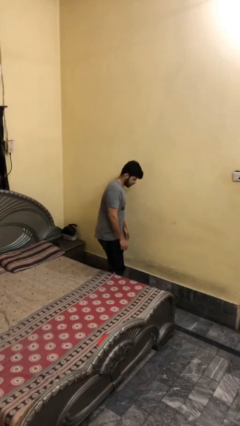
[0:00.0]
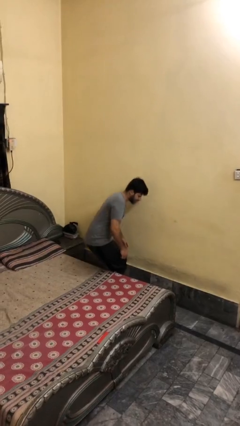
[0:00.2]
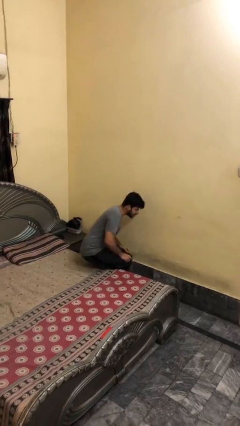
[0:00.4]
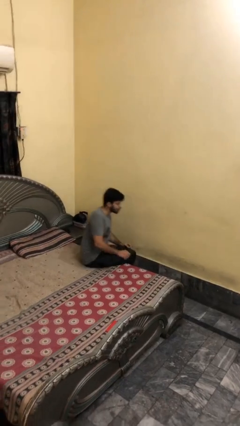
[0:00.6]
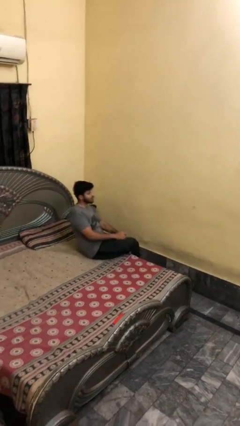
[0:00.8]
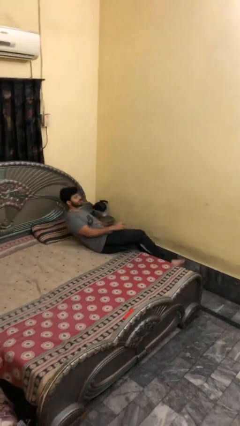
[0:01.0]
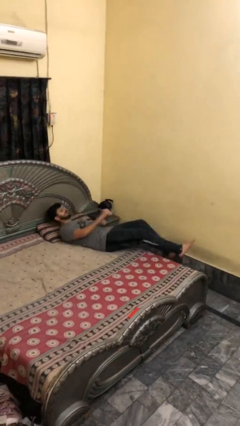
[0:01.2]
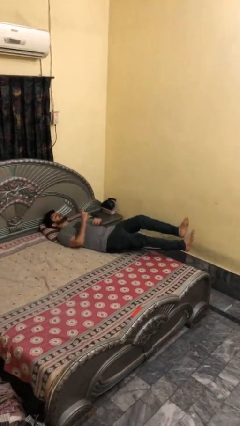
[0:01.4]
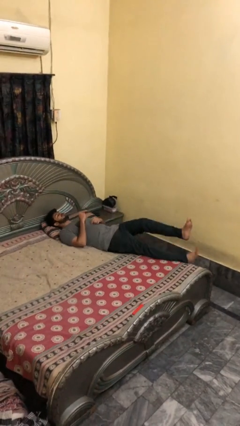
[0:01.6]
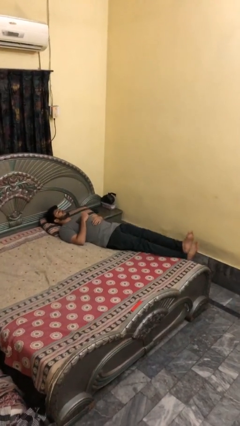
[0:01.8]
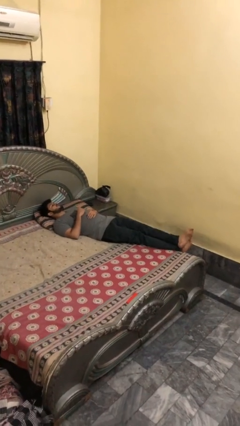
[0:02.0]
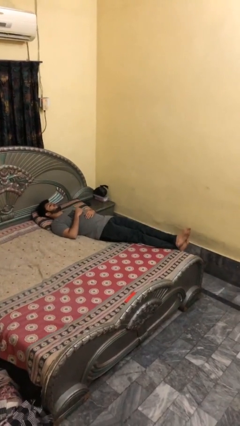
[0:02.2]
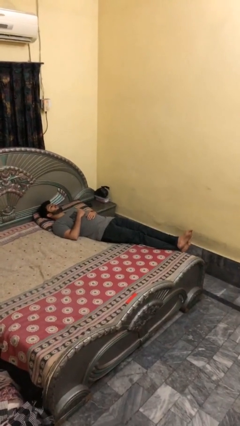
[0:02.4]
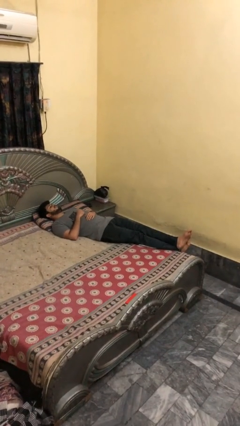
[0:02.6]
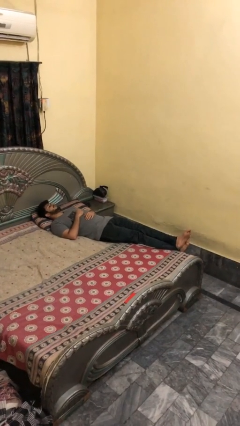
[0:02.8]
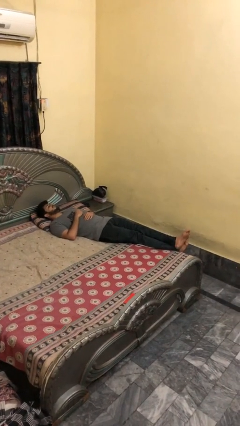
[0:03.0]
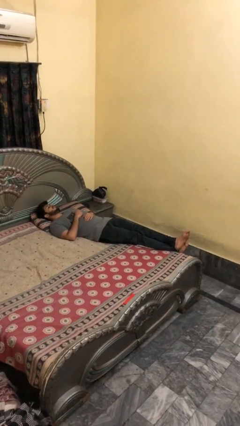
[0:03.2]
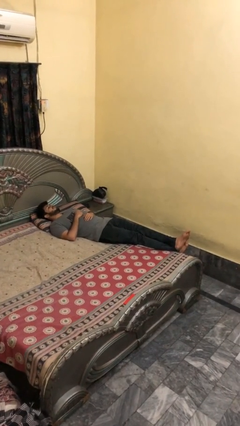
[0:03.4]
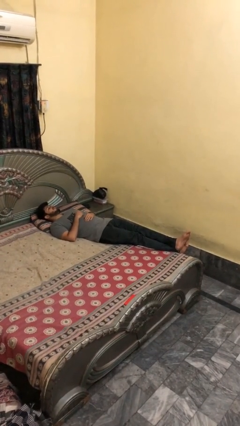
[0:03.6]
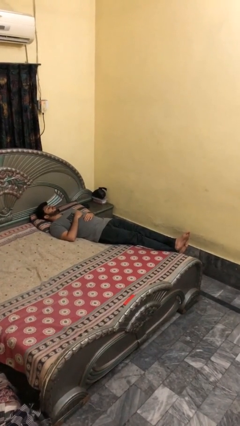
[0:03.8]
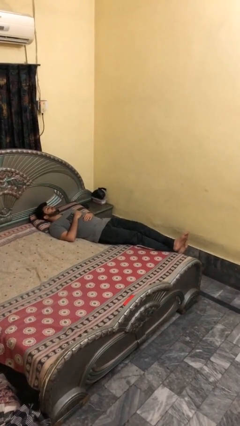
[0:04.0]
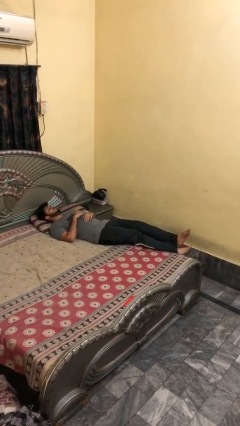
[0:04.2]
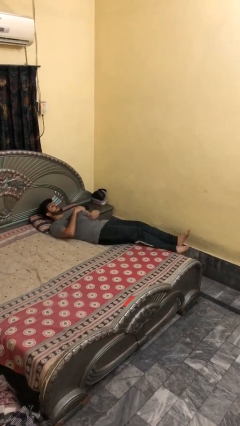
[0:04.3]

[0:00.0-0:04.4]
person lies down on bed

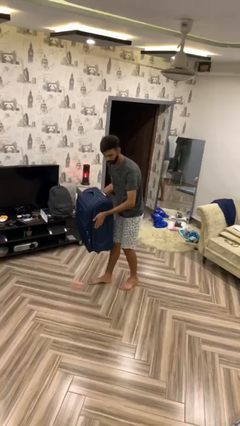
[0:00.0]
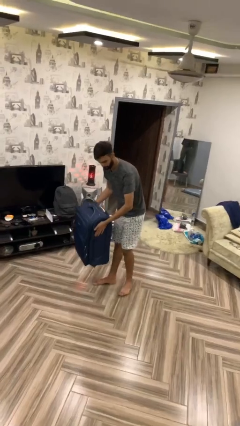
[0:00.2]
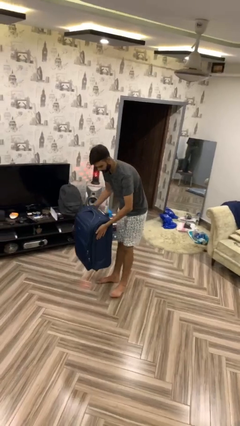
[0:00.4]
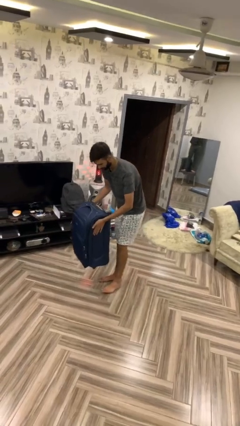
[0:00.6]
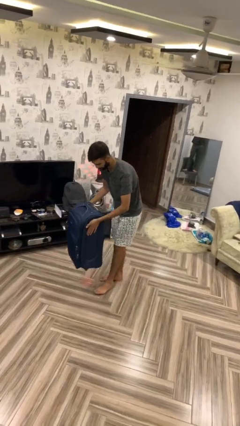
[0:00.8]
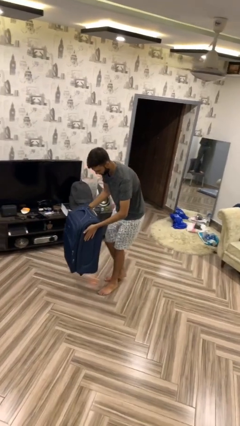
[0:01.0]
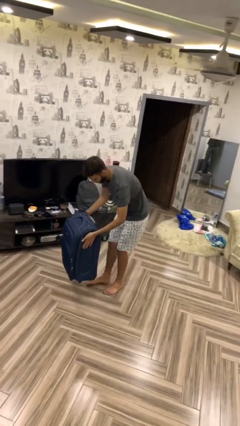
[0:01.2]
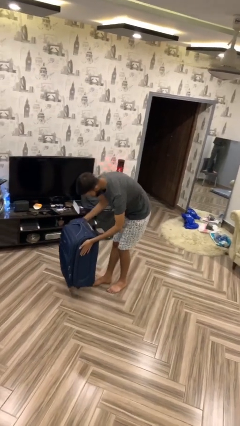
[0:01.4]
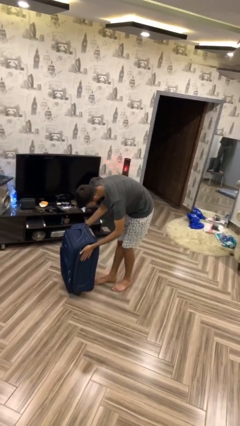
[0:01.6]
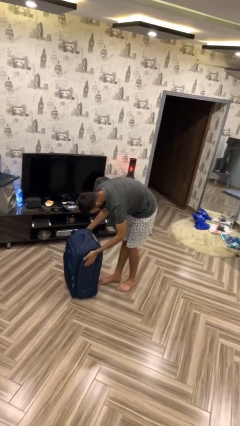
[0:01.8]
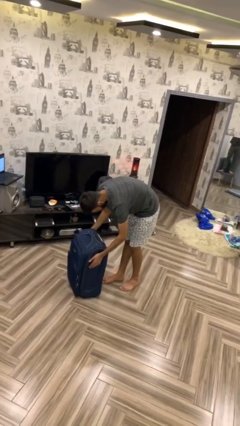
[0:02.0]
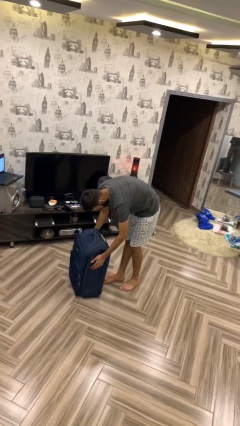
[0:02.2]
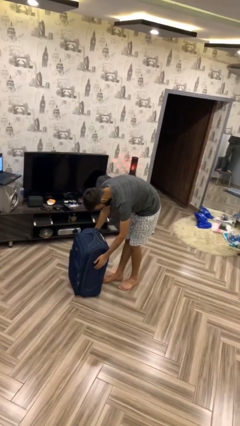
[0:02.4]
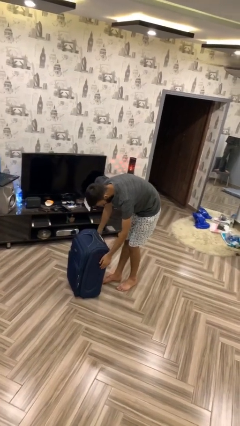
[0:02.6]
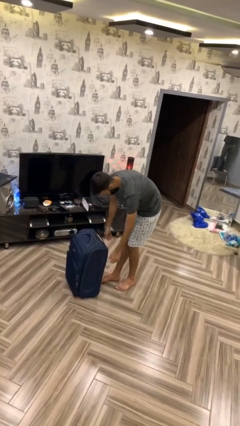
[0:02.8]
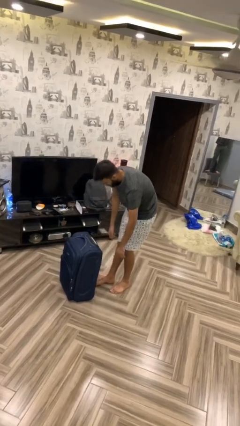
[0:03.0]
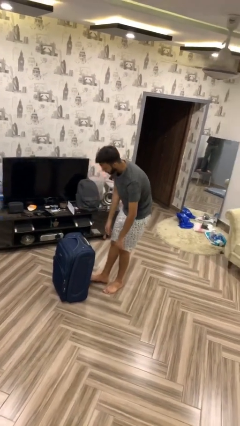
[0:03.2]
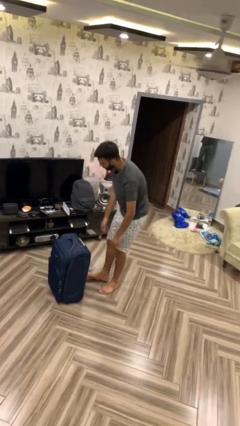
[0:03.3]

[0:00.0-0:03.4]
person puts down object on floor

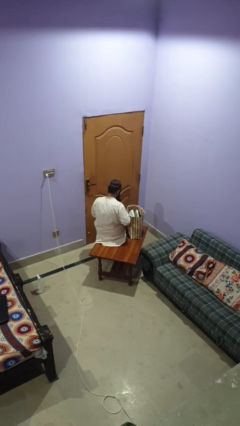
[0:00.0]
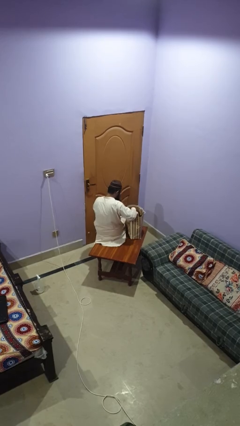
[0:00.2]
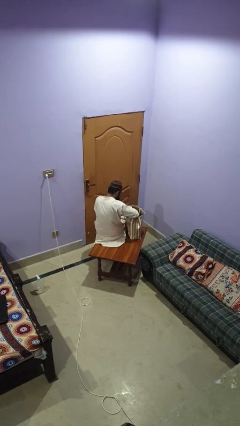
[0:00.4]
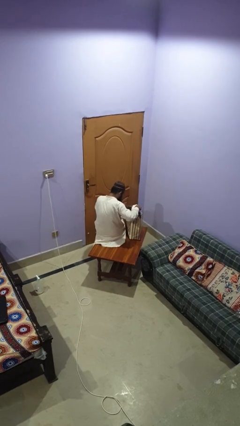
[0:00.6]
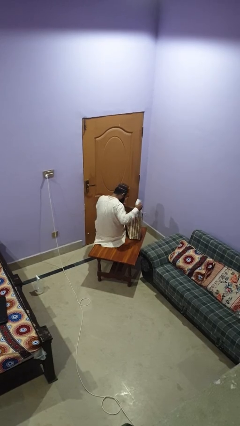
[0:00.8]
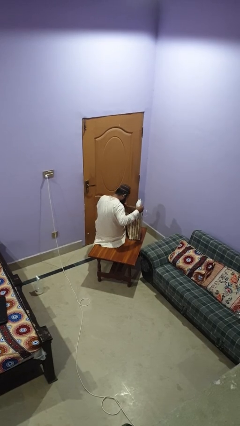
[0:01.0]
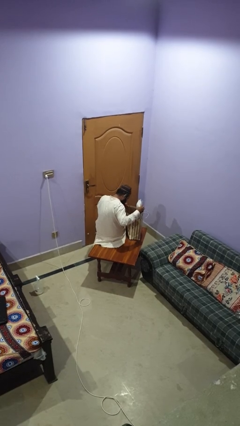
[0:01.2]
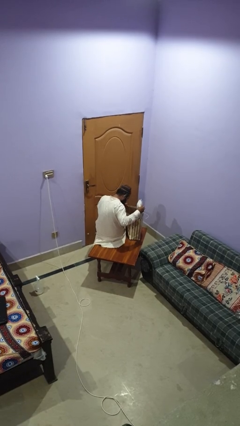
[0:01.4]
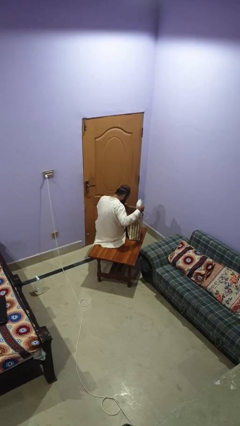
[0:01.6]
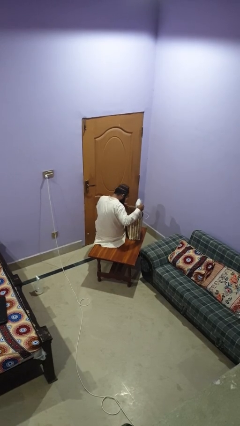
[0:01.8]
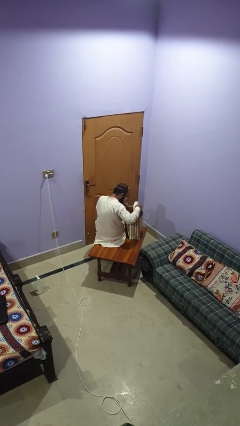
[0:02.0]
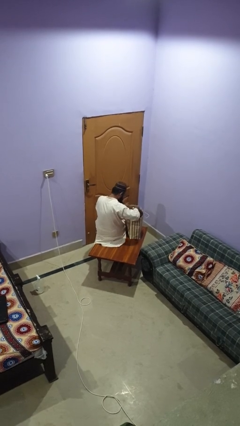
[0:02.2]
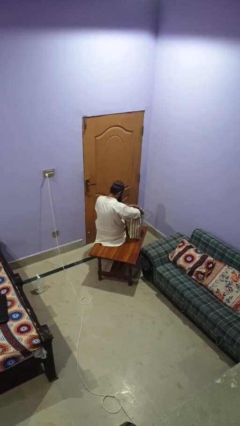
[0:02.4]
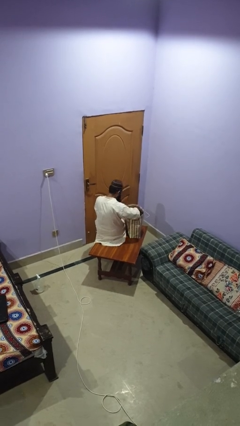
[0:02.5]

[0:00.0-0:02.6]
person searches in bag

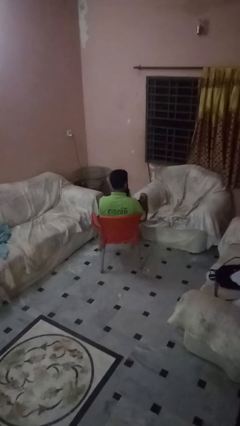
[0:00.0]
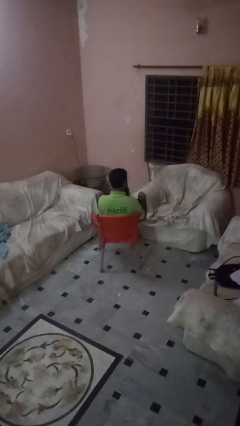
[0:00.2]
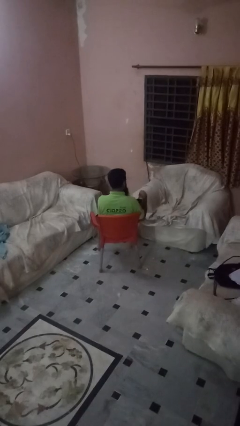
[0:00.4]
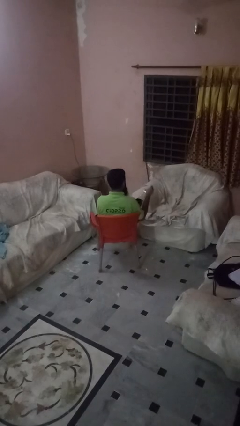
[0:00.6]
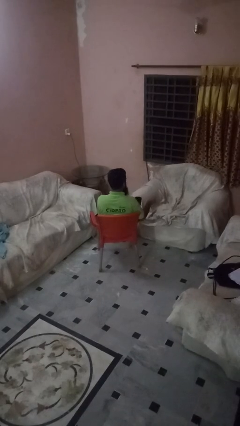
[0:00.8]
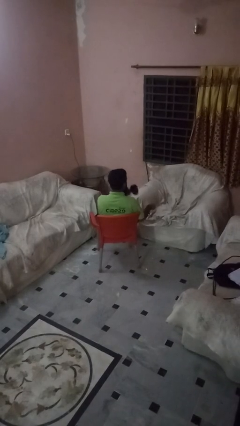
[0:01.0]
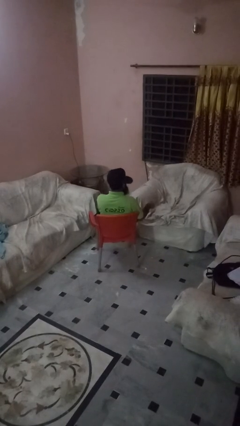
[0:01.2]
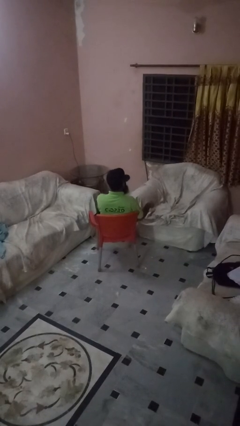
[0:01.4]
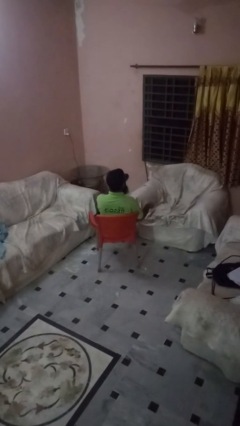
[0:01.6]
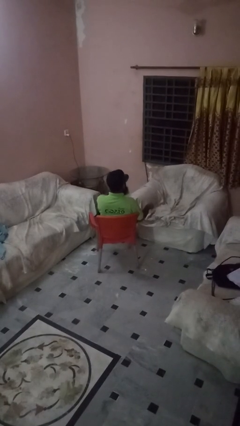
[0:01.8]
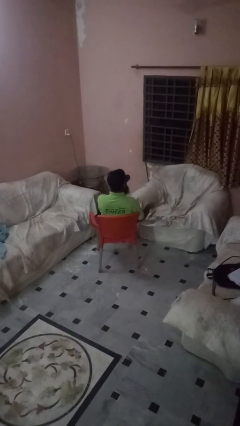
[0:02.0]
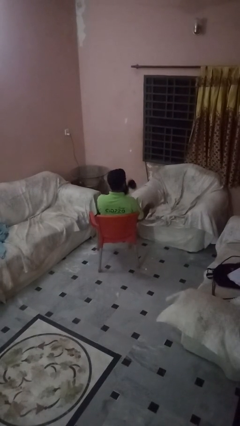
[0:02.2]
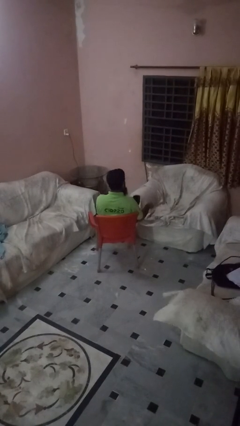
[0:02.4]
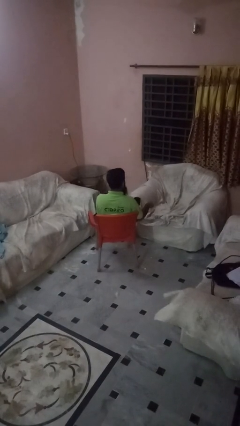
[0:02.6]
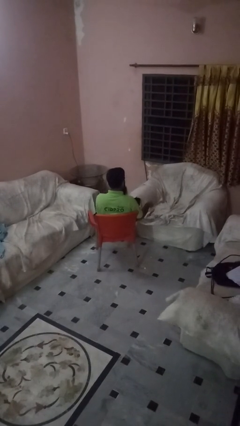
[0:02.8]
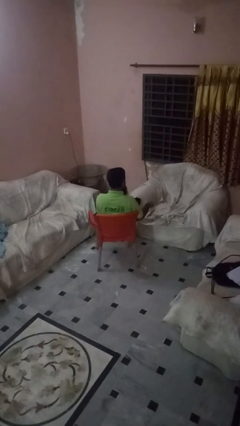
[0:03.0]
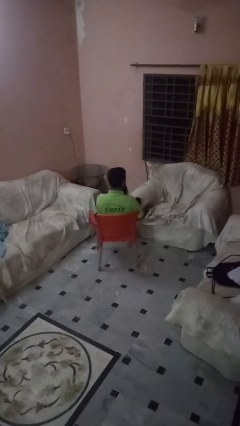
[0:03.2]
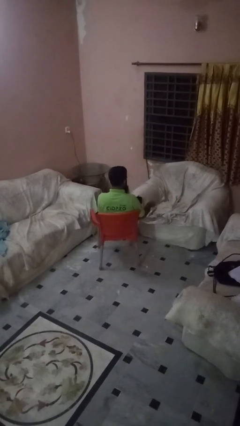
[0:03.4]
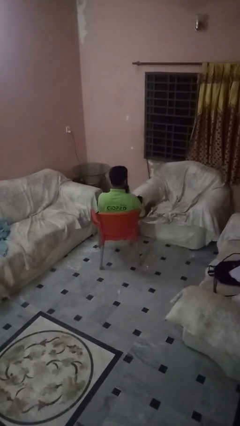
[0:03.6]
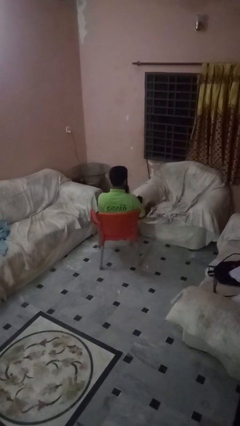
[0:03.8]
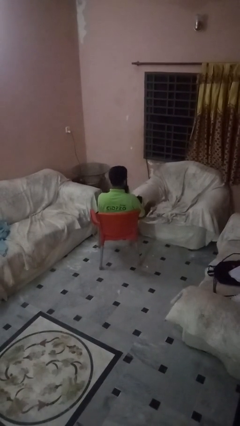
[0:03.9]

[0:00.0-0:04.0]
person drinks from mug

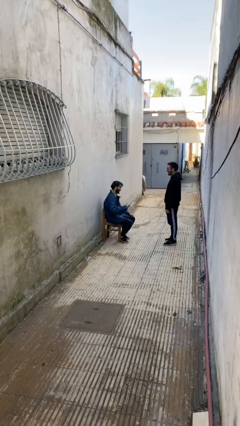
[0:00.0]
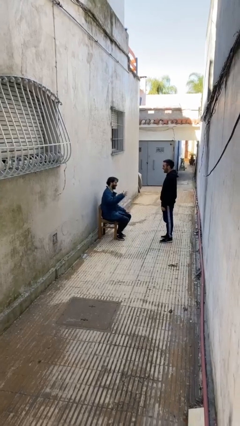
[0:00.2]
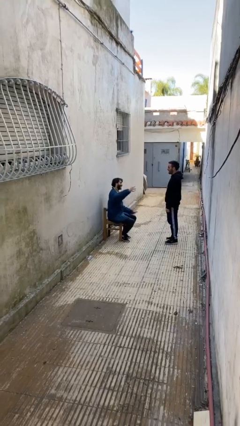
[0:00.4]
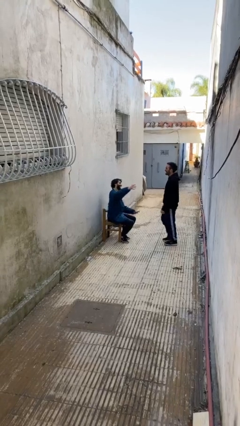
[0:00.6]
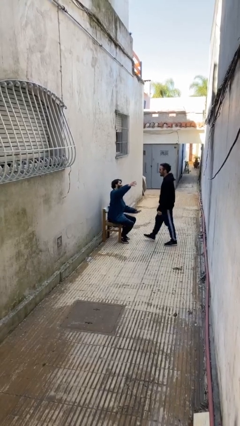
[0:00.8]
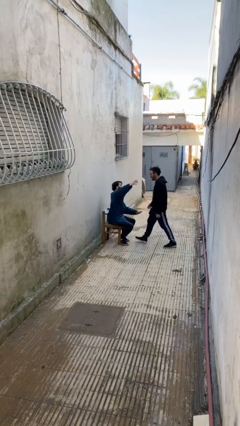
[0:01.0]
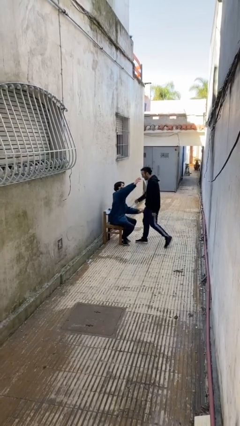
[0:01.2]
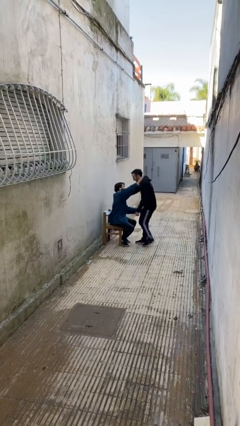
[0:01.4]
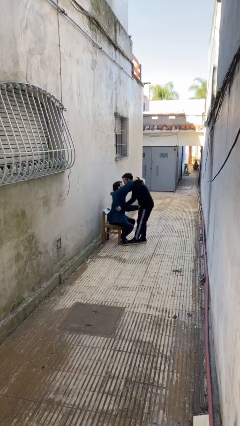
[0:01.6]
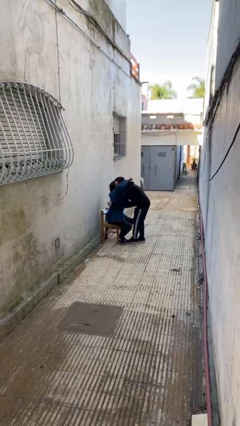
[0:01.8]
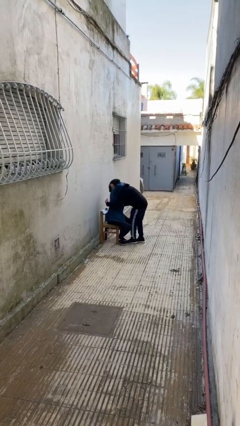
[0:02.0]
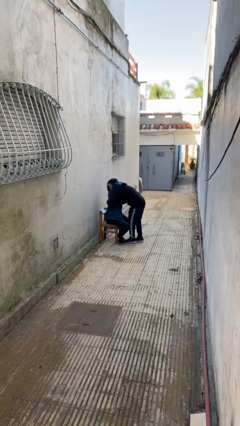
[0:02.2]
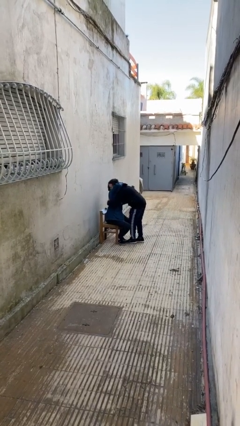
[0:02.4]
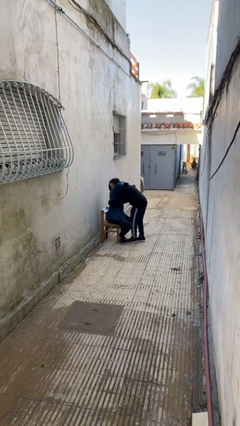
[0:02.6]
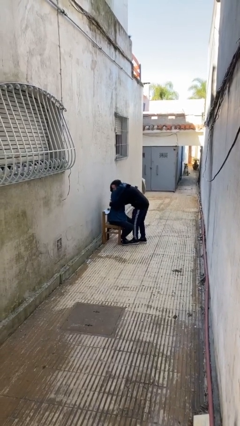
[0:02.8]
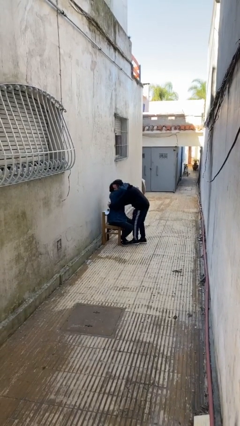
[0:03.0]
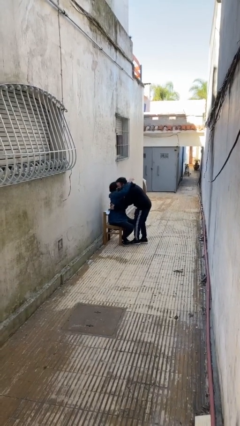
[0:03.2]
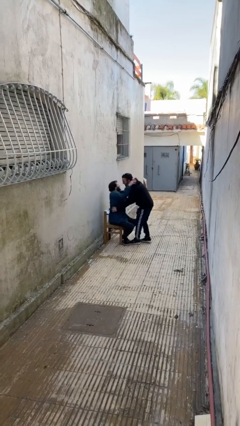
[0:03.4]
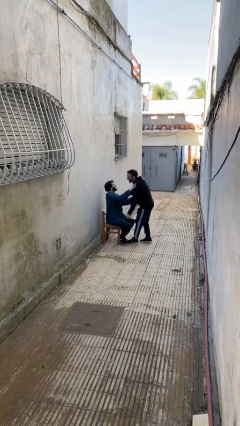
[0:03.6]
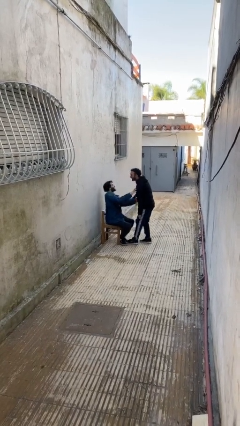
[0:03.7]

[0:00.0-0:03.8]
person embraces person
